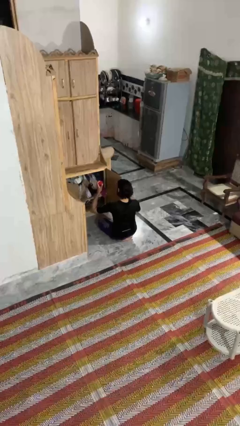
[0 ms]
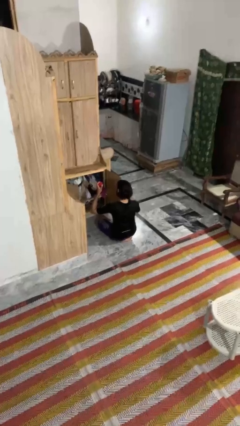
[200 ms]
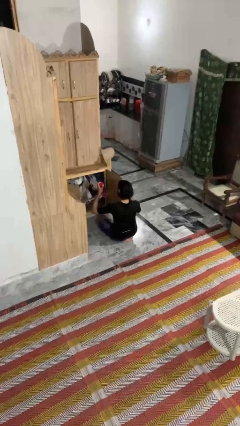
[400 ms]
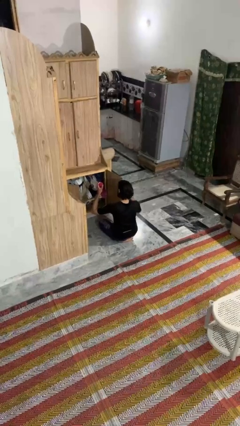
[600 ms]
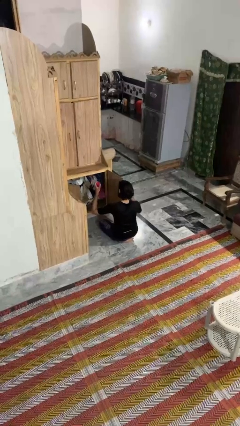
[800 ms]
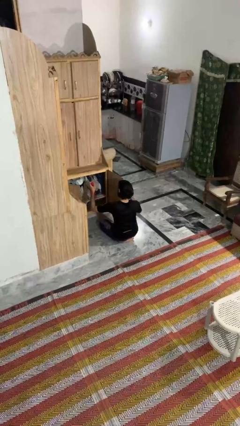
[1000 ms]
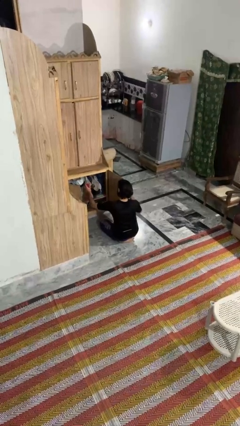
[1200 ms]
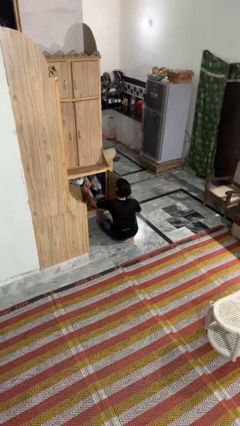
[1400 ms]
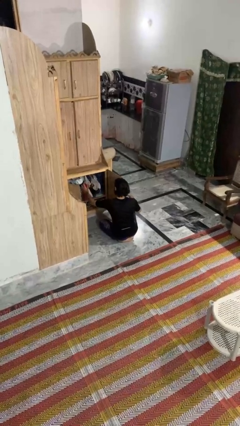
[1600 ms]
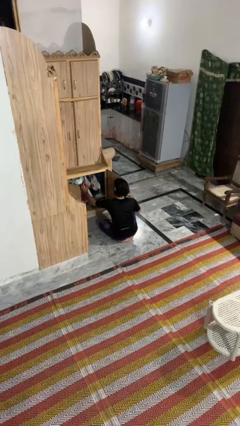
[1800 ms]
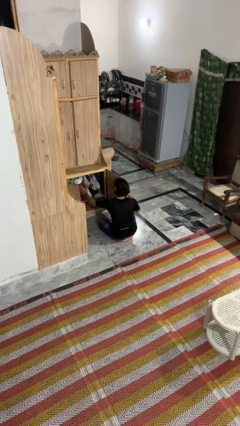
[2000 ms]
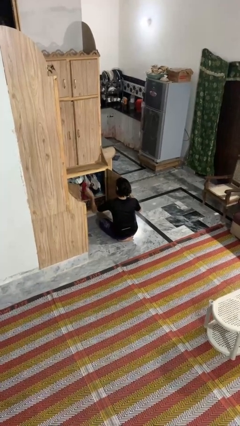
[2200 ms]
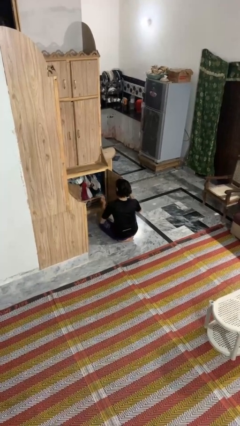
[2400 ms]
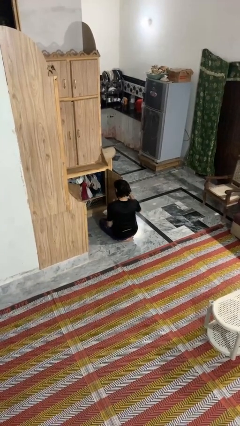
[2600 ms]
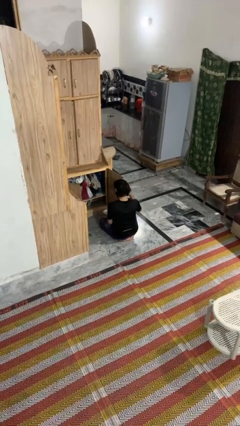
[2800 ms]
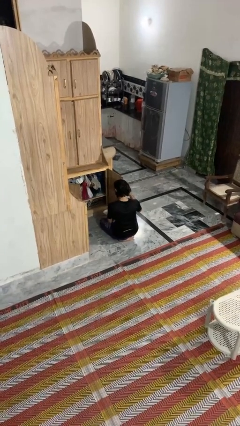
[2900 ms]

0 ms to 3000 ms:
person puts down object into cabinet

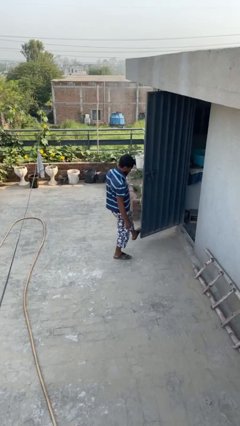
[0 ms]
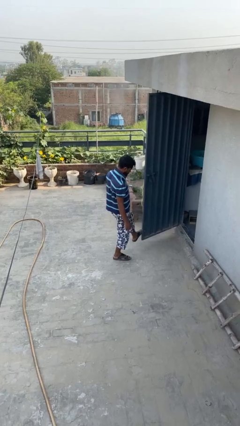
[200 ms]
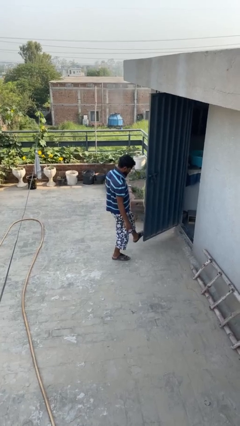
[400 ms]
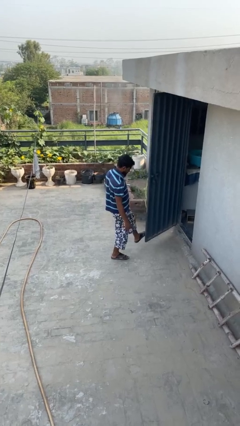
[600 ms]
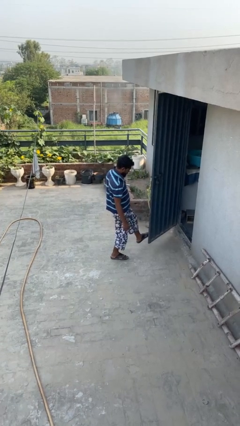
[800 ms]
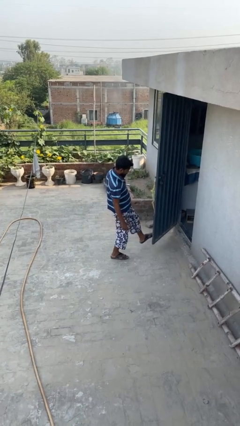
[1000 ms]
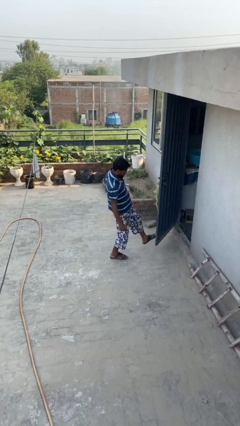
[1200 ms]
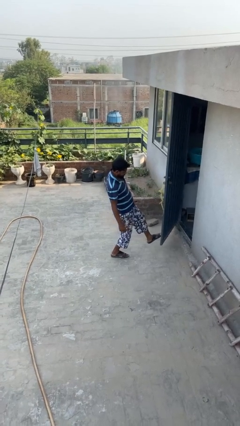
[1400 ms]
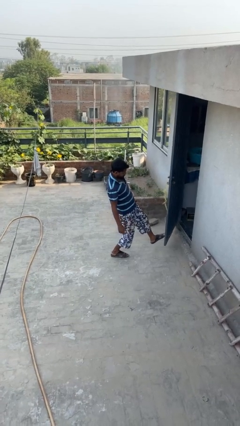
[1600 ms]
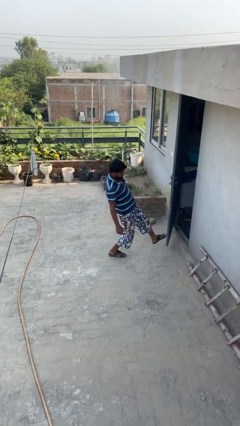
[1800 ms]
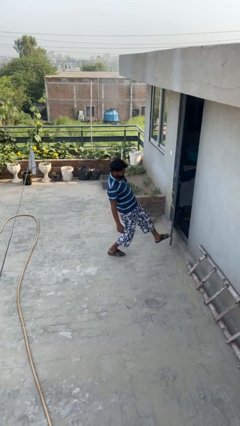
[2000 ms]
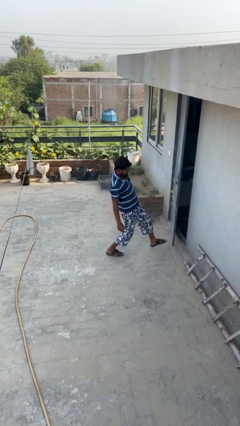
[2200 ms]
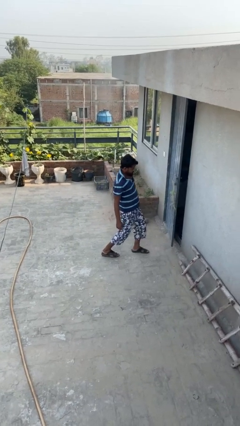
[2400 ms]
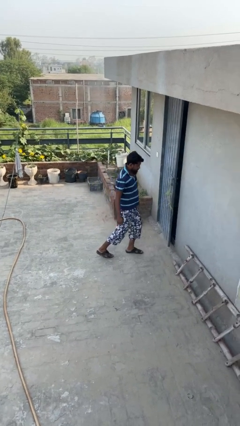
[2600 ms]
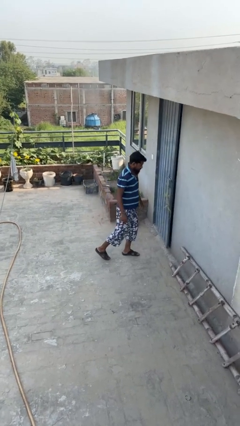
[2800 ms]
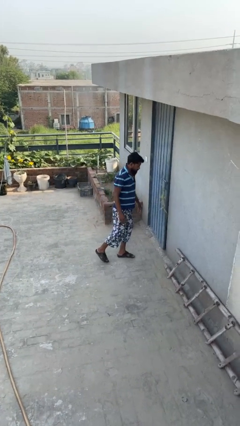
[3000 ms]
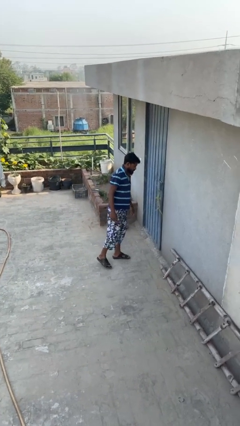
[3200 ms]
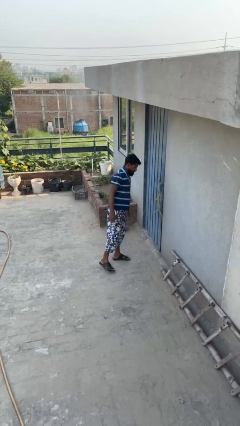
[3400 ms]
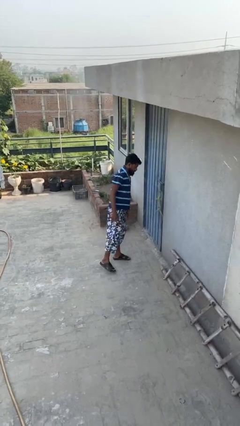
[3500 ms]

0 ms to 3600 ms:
person closes door with foot

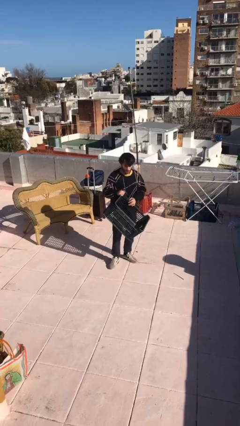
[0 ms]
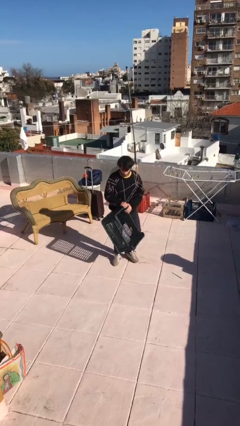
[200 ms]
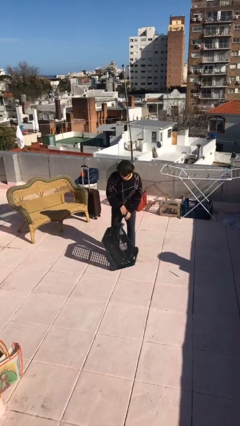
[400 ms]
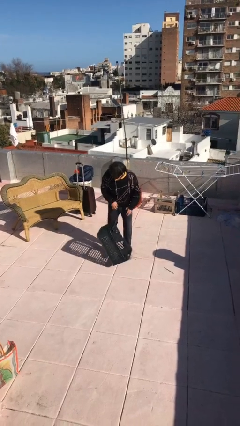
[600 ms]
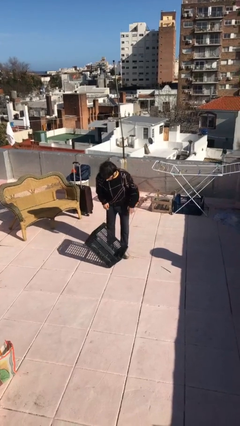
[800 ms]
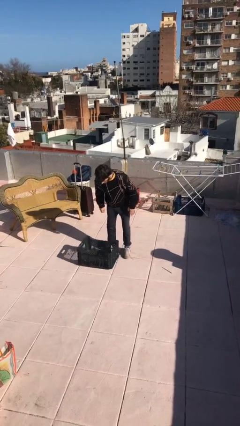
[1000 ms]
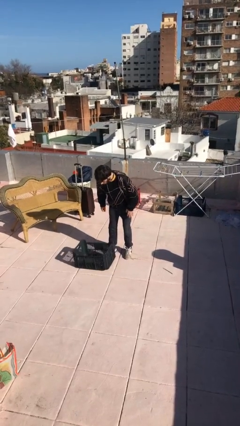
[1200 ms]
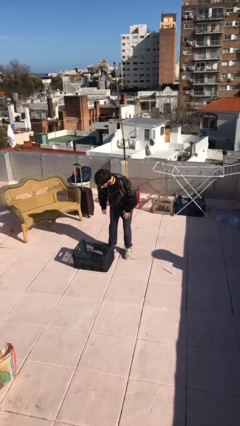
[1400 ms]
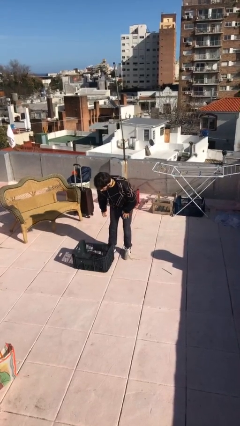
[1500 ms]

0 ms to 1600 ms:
person drops object

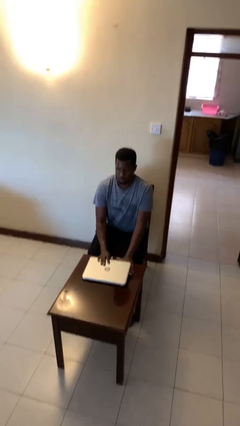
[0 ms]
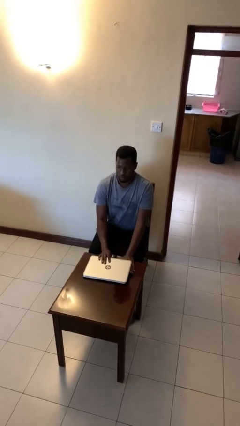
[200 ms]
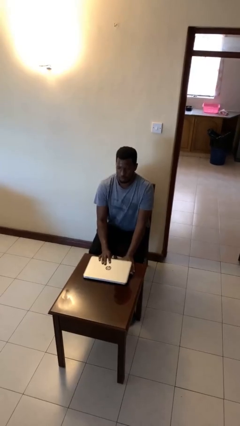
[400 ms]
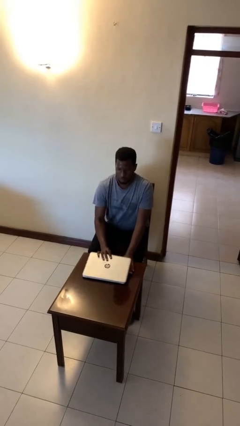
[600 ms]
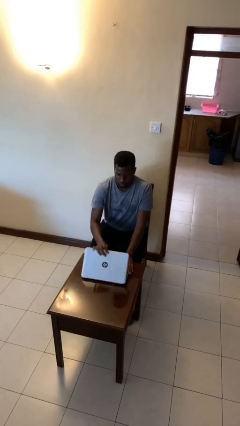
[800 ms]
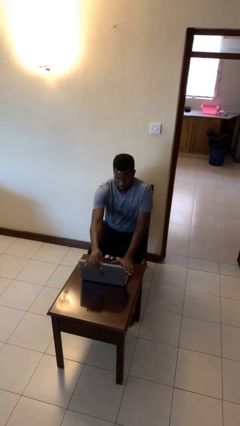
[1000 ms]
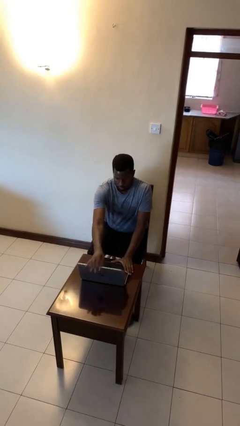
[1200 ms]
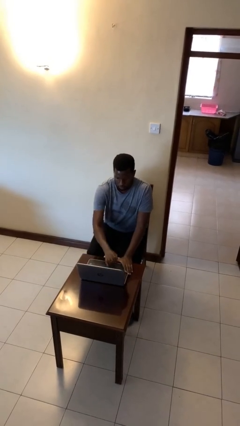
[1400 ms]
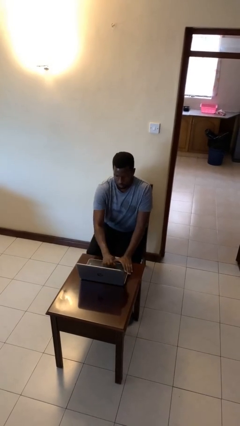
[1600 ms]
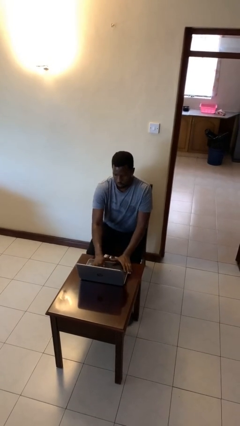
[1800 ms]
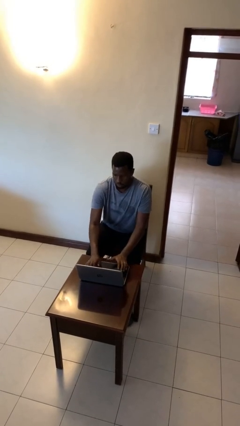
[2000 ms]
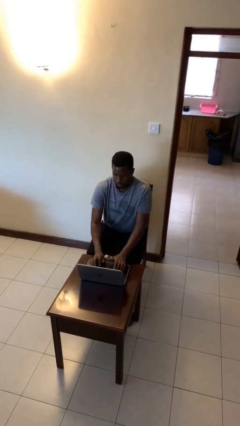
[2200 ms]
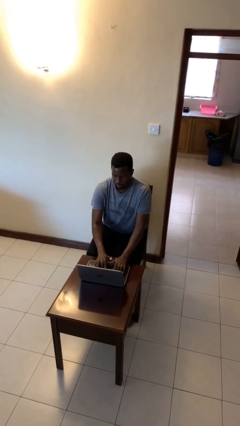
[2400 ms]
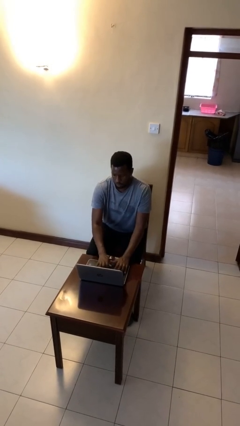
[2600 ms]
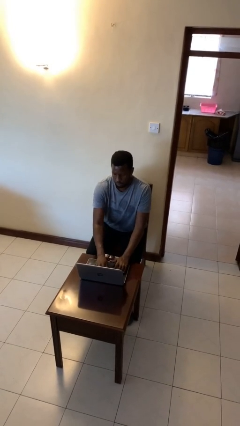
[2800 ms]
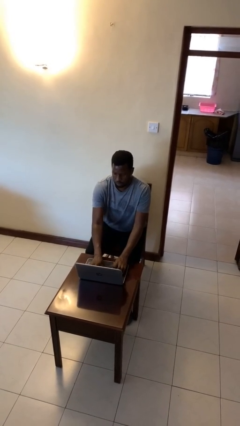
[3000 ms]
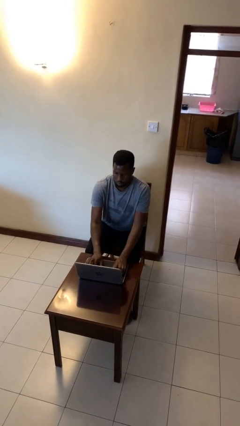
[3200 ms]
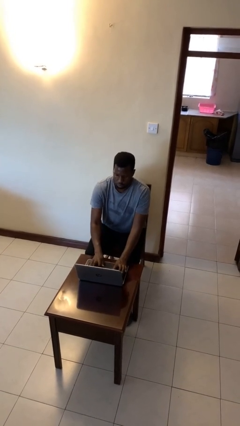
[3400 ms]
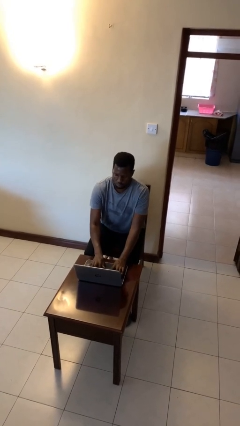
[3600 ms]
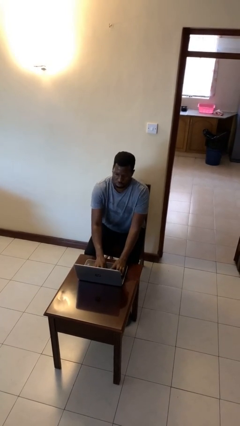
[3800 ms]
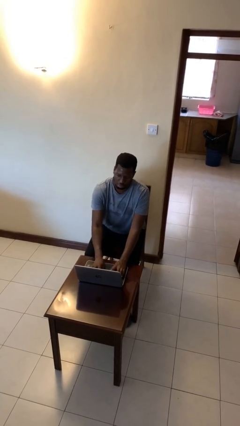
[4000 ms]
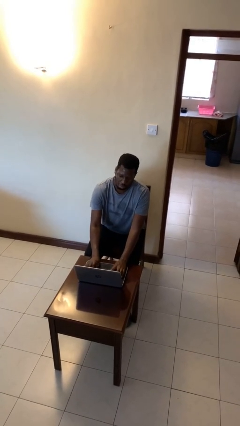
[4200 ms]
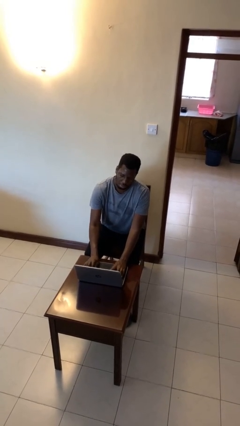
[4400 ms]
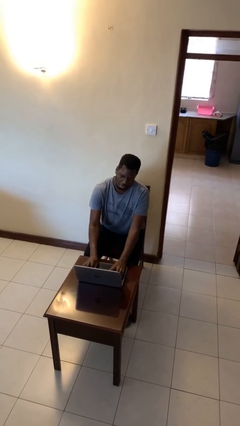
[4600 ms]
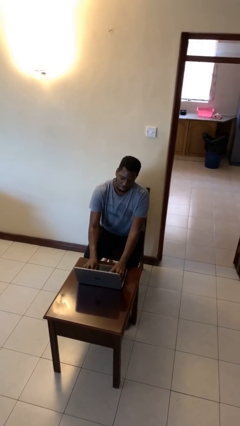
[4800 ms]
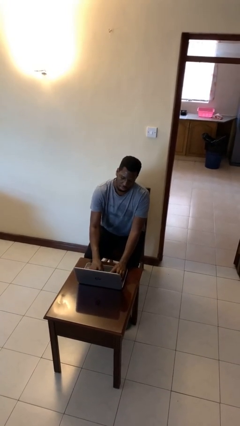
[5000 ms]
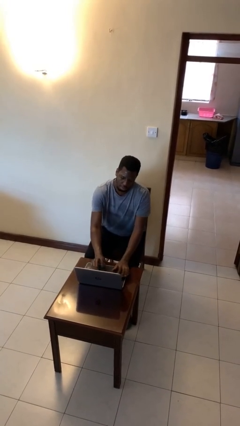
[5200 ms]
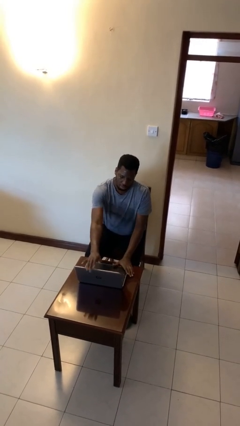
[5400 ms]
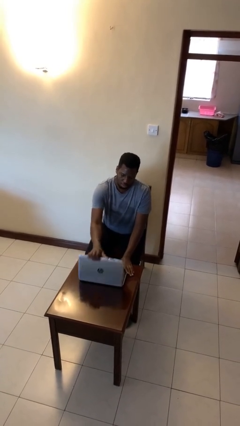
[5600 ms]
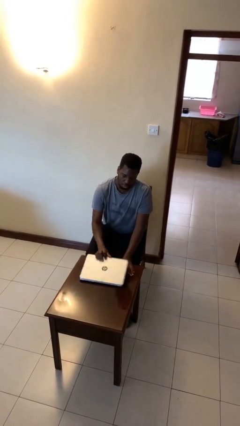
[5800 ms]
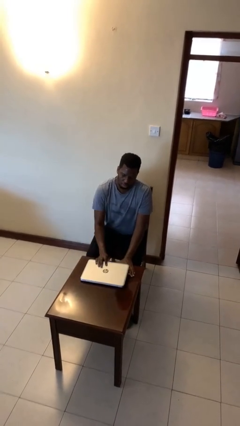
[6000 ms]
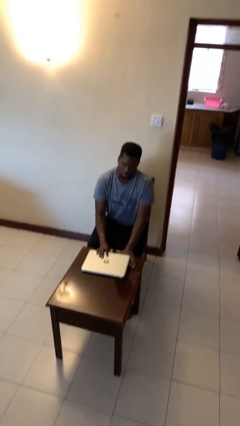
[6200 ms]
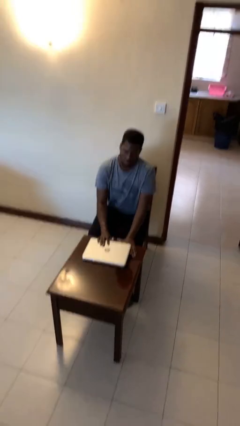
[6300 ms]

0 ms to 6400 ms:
person interacts with laptop

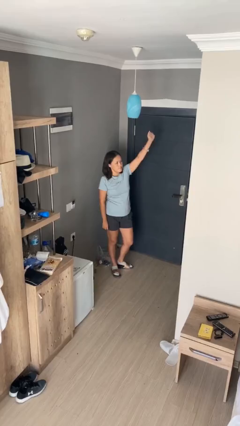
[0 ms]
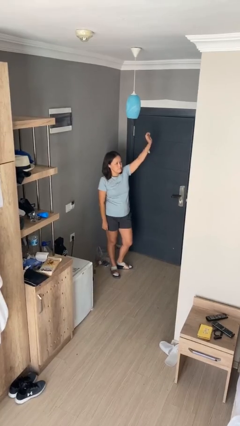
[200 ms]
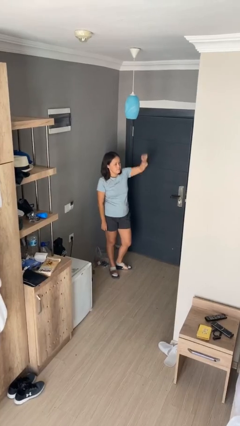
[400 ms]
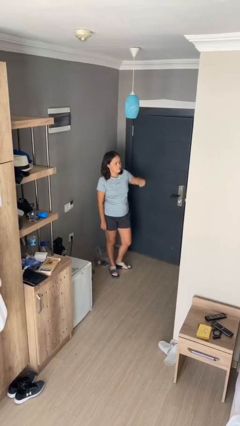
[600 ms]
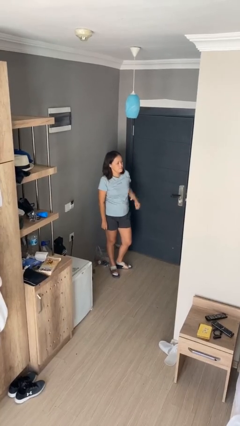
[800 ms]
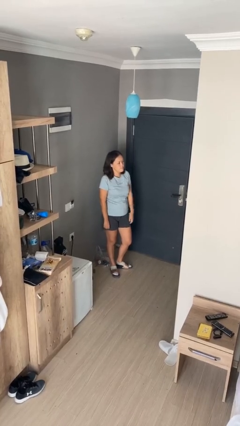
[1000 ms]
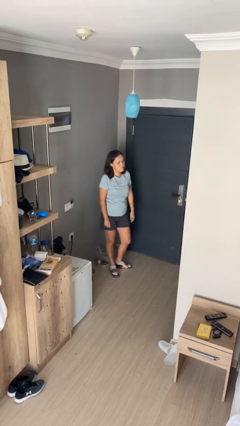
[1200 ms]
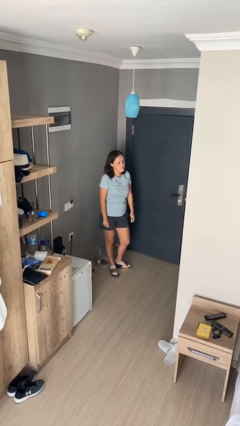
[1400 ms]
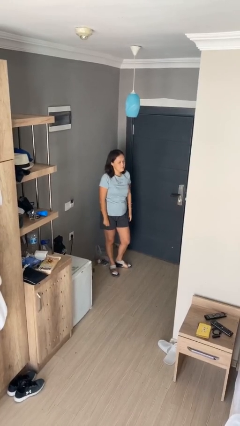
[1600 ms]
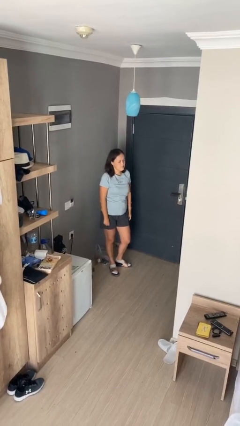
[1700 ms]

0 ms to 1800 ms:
person gestures lower hand

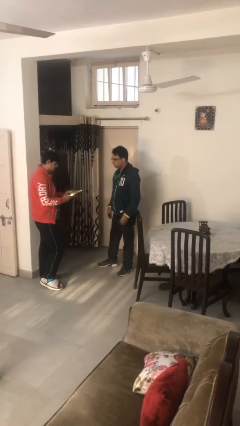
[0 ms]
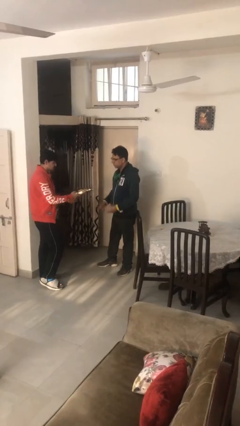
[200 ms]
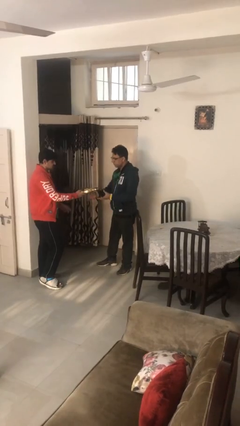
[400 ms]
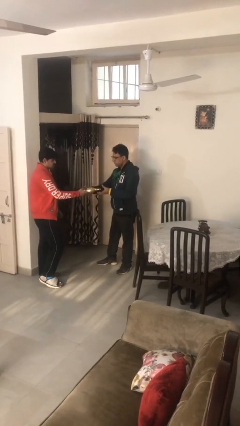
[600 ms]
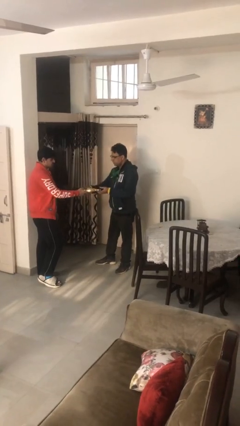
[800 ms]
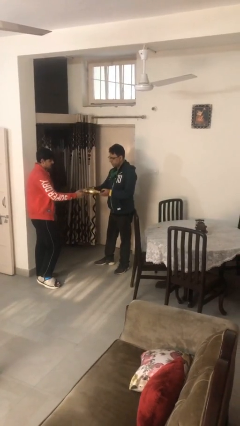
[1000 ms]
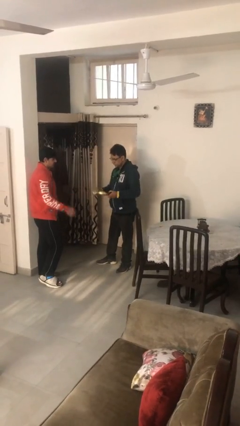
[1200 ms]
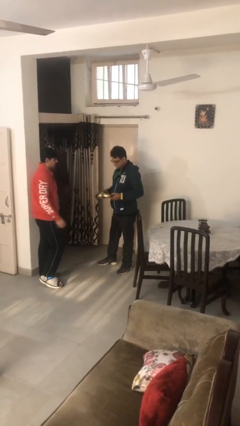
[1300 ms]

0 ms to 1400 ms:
person transfers object to person
